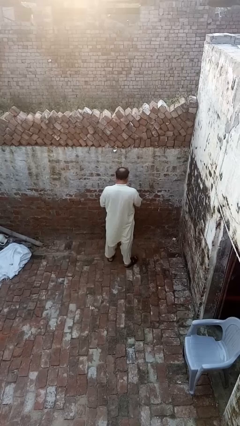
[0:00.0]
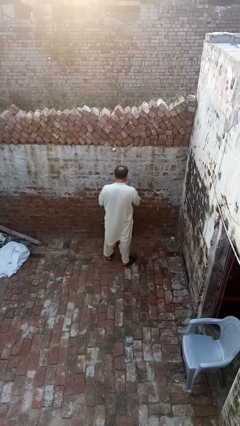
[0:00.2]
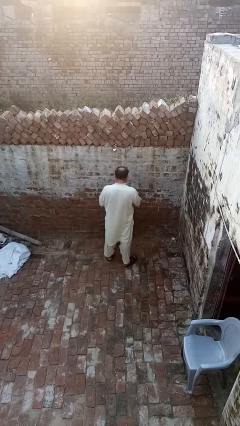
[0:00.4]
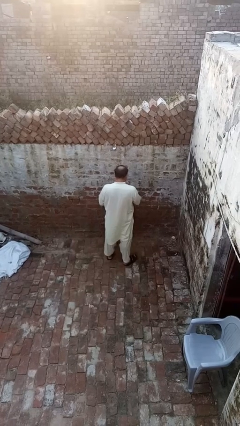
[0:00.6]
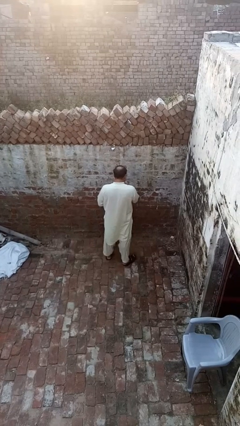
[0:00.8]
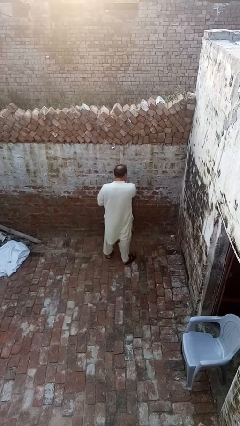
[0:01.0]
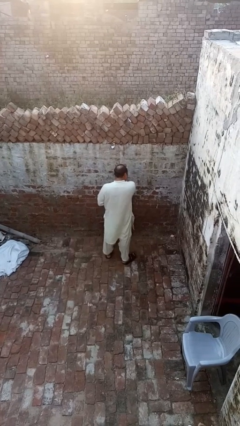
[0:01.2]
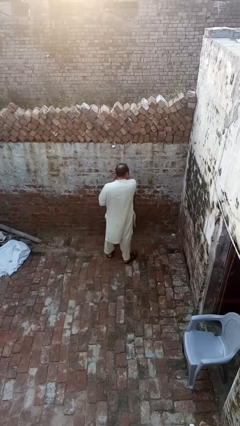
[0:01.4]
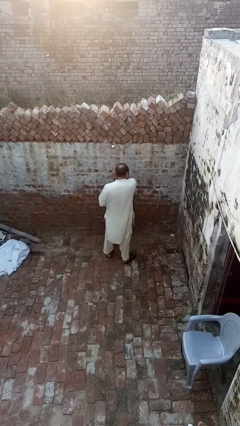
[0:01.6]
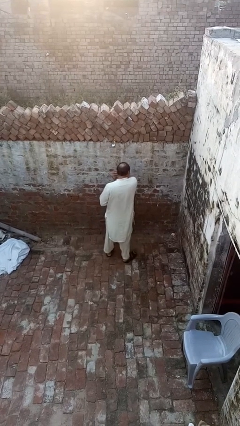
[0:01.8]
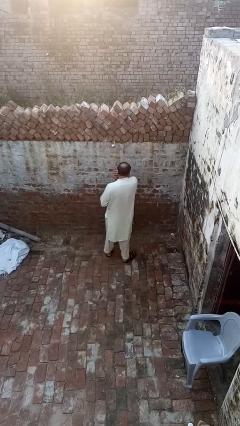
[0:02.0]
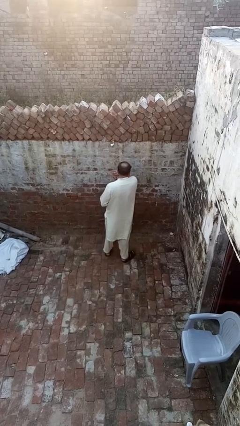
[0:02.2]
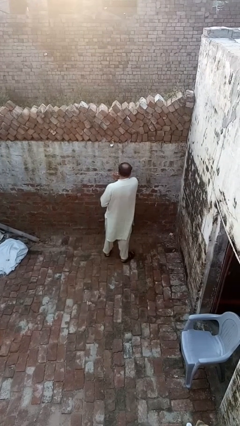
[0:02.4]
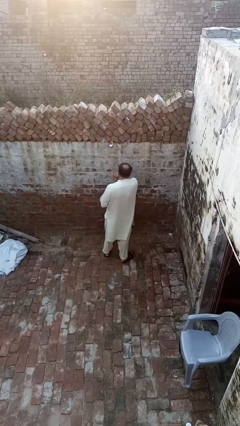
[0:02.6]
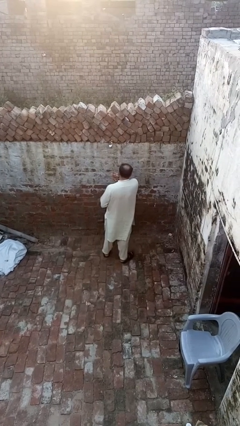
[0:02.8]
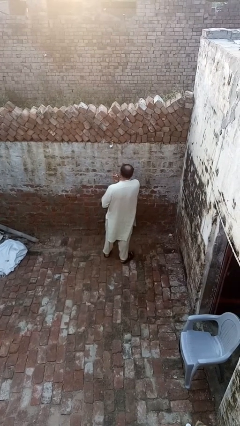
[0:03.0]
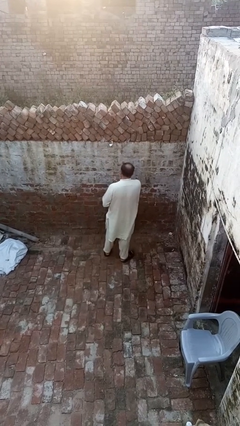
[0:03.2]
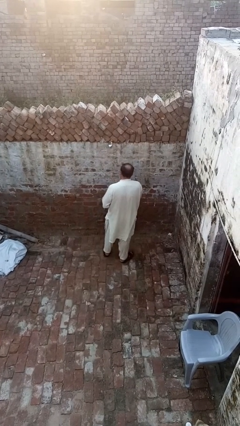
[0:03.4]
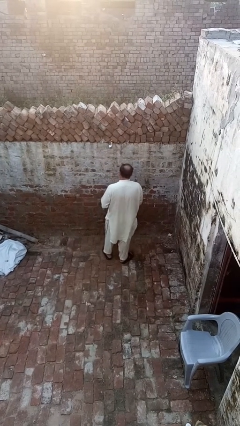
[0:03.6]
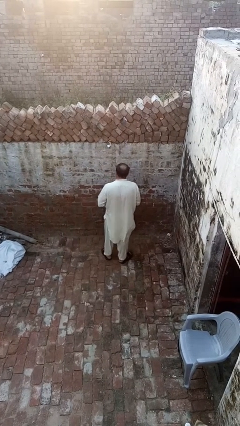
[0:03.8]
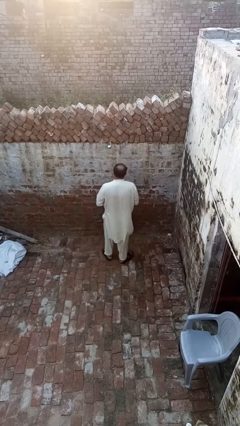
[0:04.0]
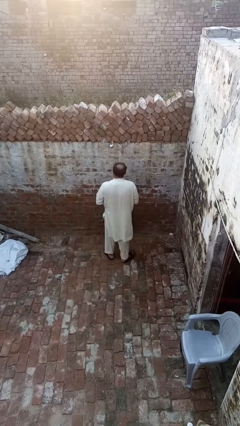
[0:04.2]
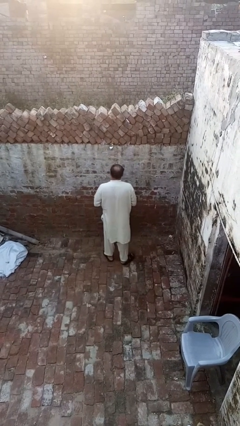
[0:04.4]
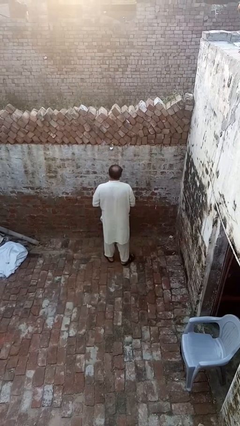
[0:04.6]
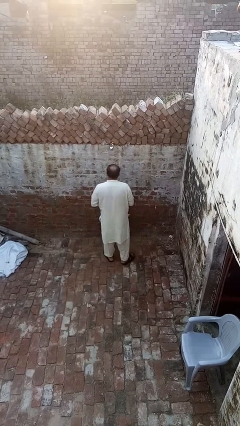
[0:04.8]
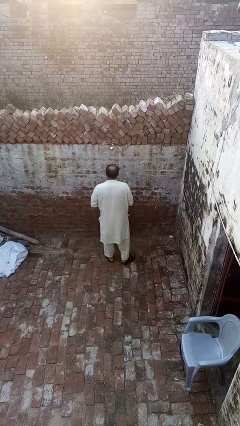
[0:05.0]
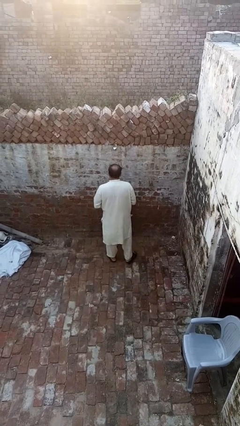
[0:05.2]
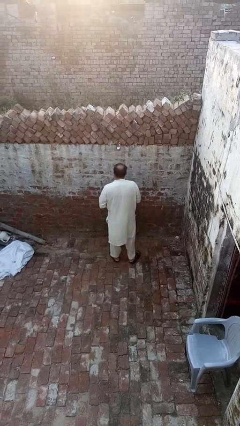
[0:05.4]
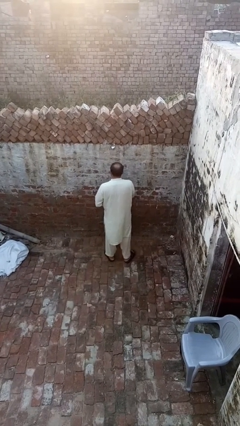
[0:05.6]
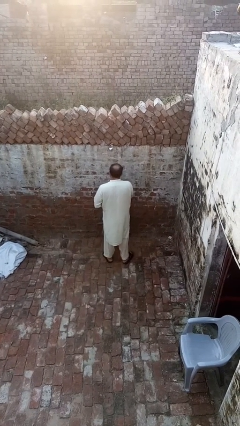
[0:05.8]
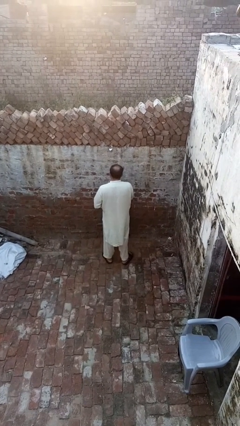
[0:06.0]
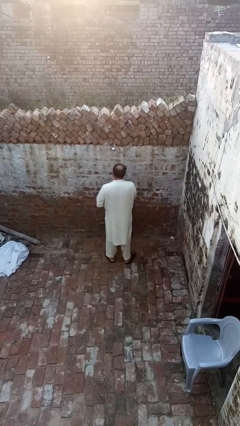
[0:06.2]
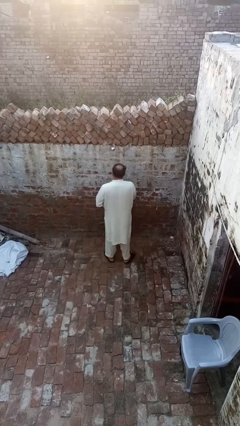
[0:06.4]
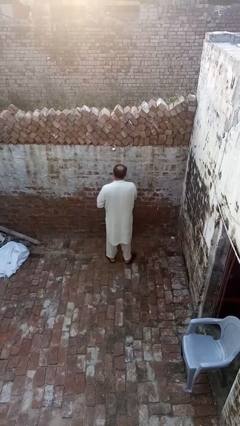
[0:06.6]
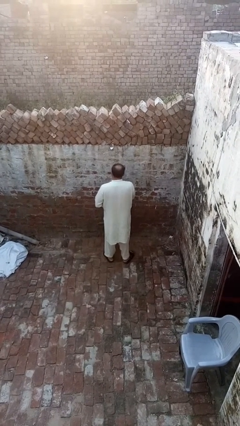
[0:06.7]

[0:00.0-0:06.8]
person puts on earrings

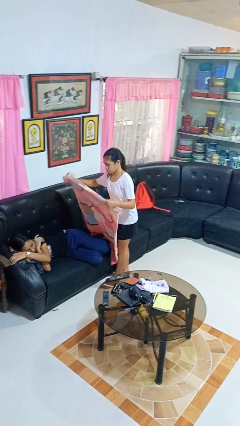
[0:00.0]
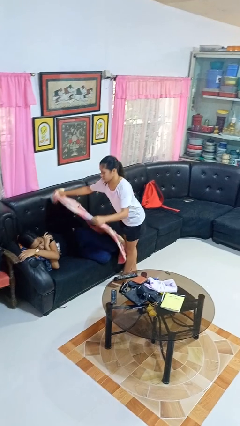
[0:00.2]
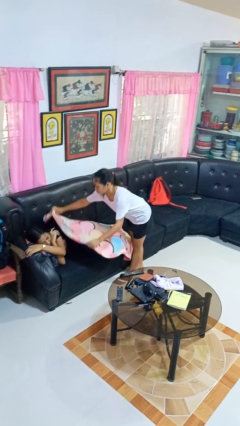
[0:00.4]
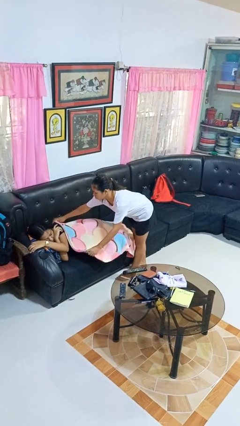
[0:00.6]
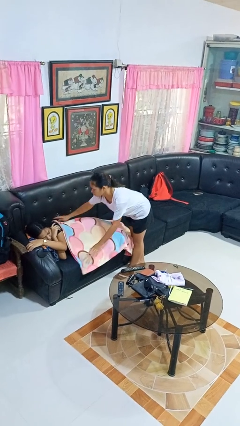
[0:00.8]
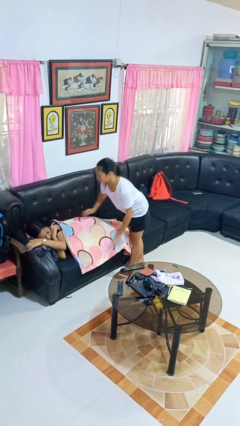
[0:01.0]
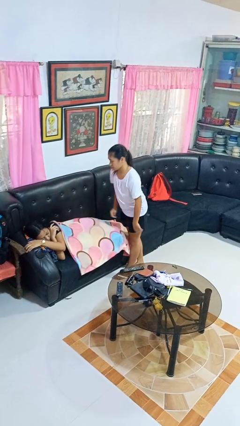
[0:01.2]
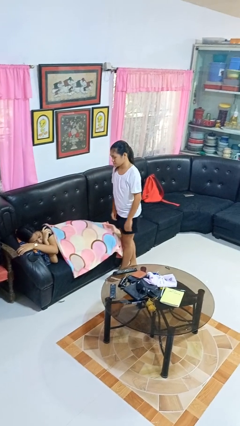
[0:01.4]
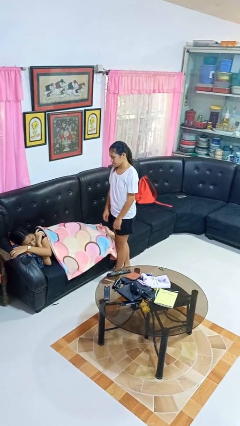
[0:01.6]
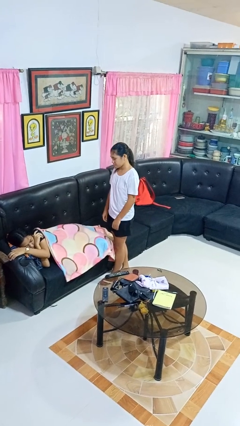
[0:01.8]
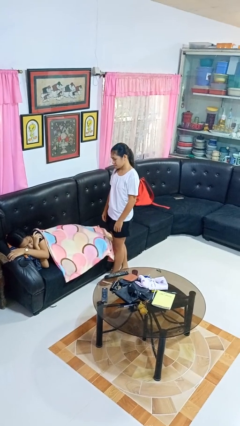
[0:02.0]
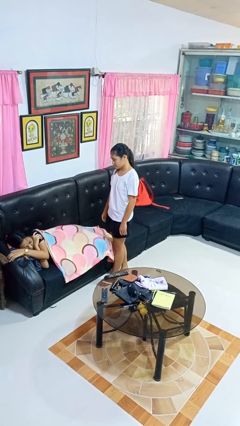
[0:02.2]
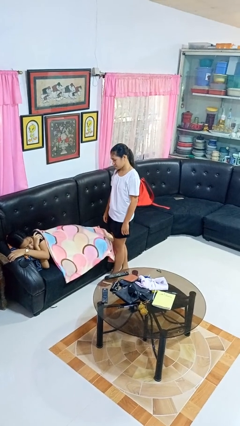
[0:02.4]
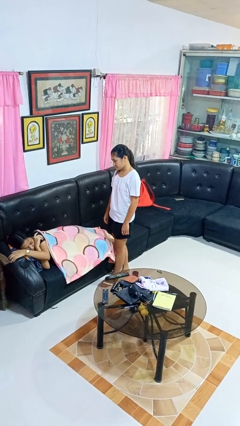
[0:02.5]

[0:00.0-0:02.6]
person covers friend with blanket

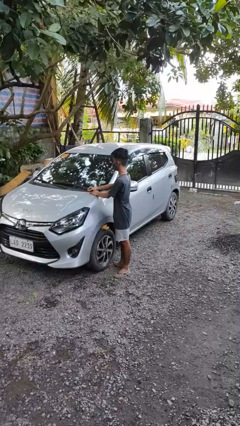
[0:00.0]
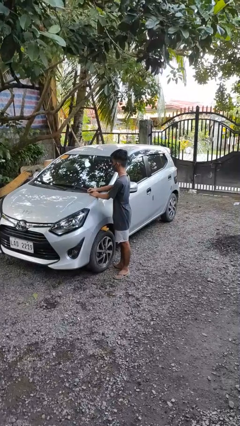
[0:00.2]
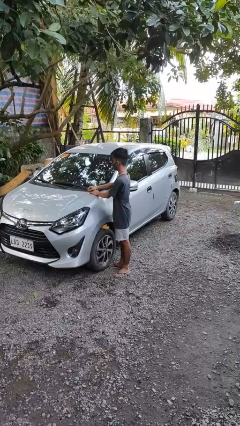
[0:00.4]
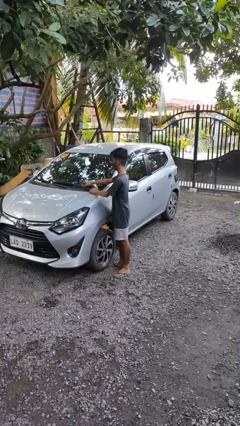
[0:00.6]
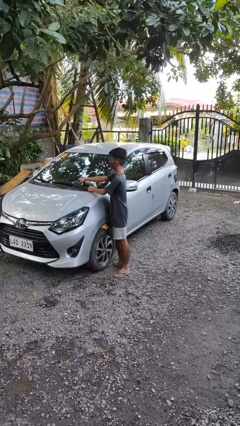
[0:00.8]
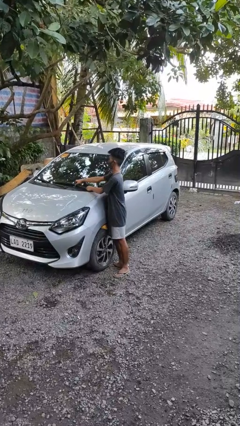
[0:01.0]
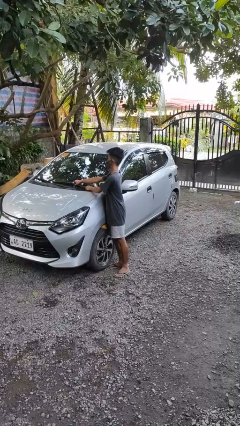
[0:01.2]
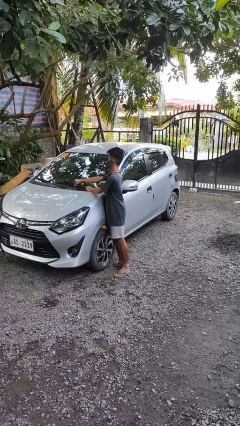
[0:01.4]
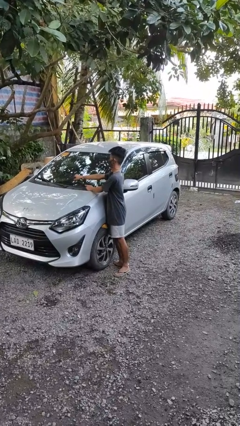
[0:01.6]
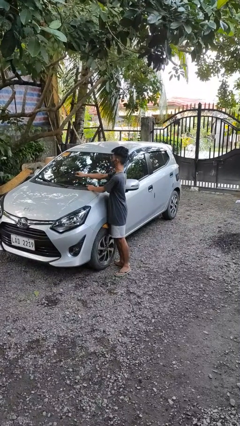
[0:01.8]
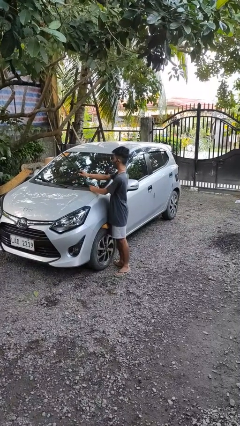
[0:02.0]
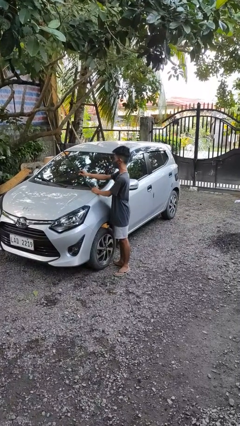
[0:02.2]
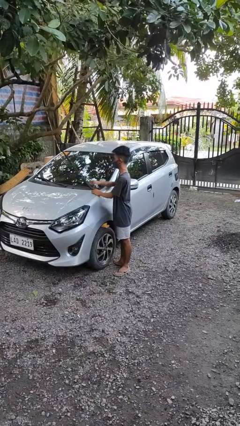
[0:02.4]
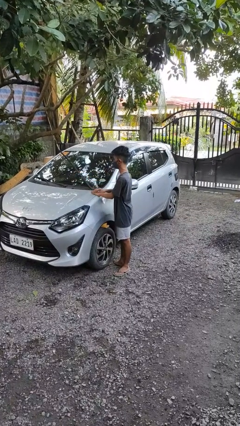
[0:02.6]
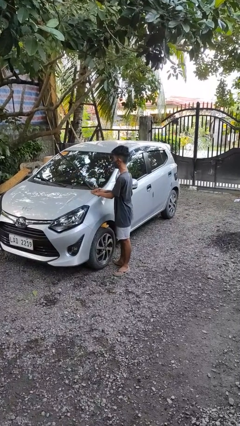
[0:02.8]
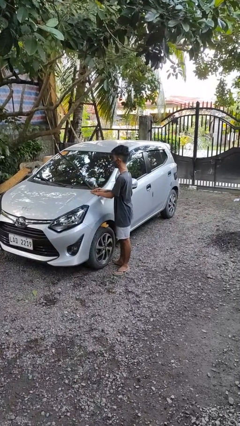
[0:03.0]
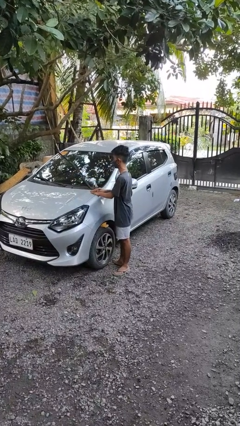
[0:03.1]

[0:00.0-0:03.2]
person flips up car wipers

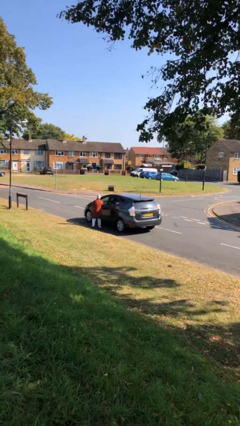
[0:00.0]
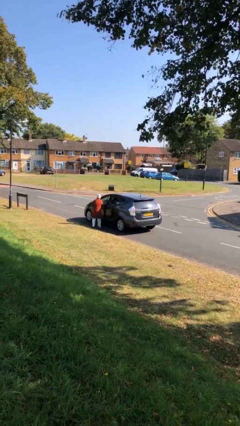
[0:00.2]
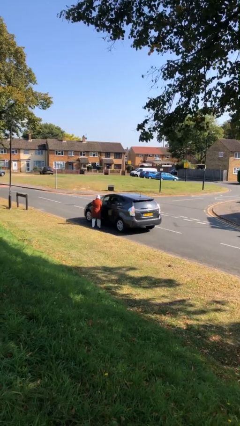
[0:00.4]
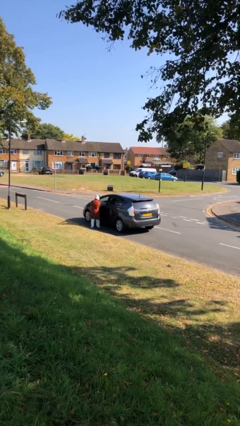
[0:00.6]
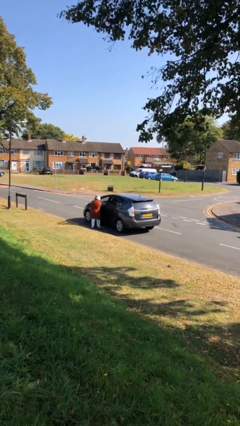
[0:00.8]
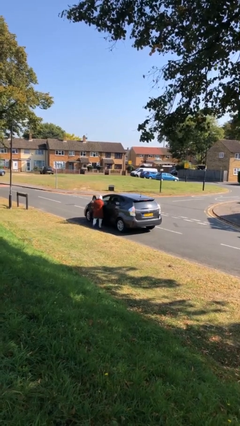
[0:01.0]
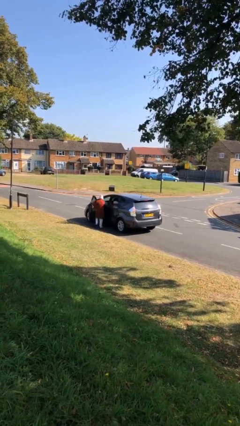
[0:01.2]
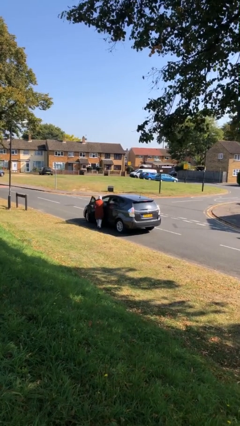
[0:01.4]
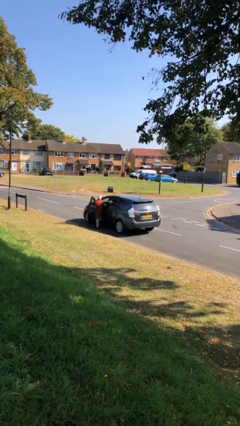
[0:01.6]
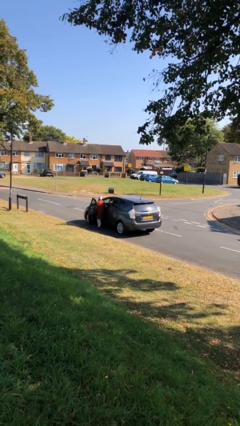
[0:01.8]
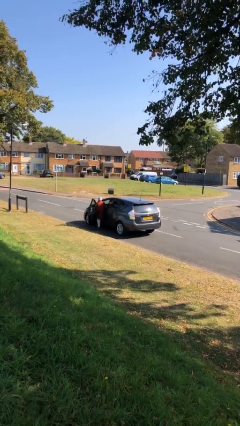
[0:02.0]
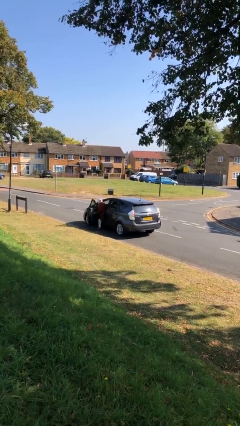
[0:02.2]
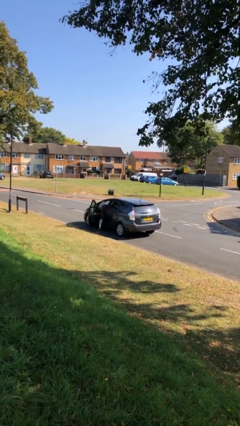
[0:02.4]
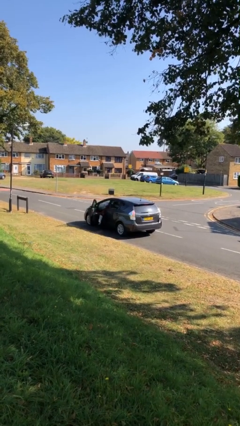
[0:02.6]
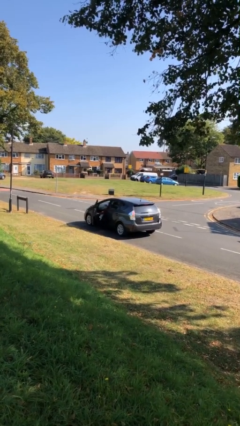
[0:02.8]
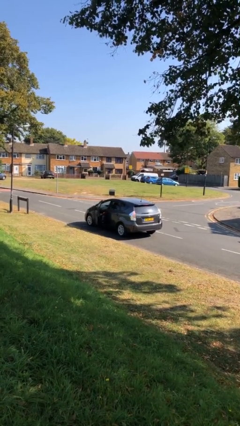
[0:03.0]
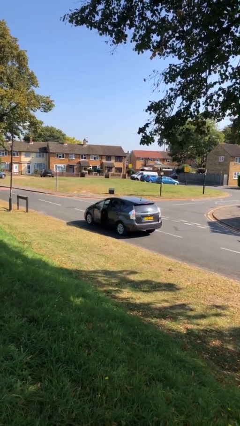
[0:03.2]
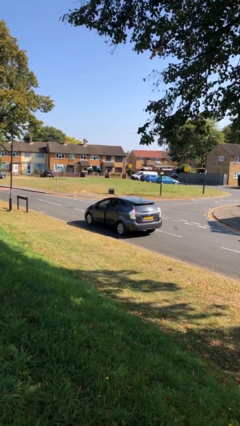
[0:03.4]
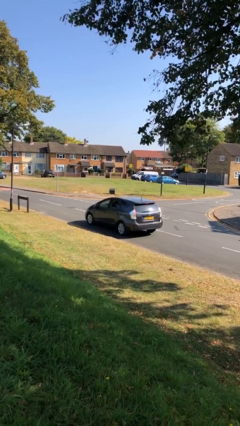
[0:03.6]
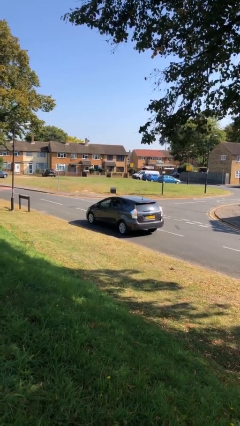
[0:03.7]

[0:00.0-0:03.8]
car picks up person

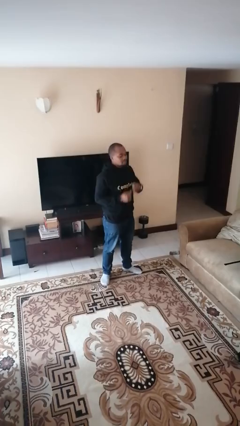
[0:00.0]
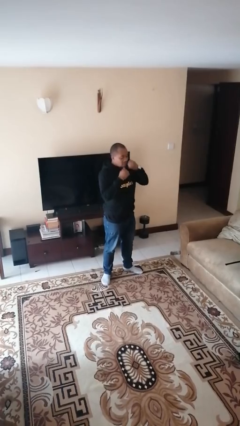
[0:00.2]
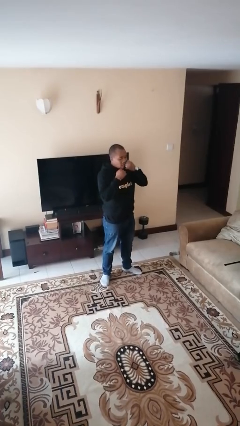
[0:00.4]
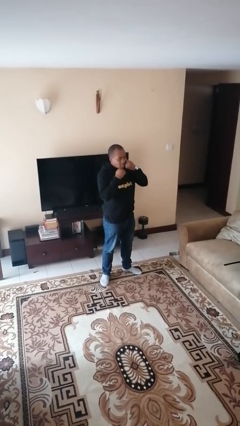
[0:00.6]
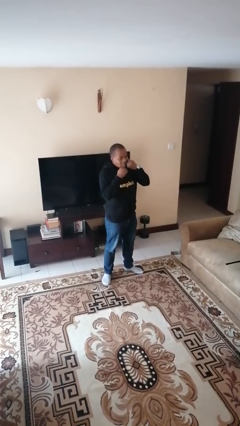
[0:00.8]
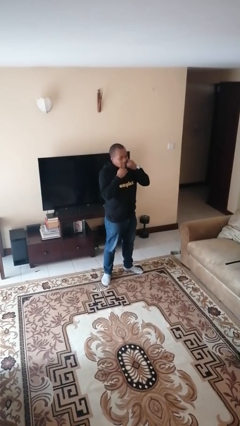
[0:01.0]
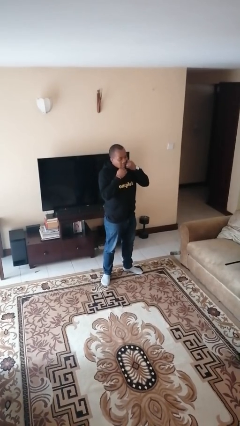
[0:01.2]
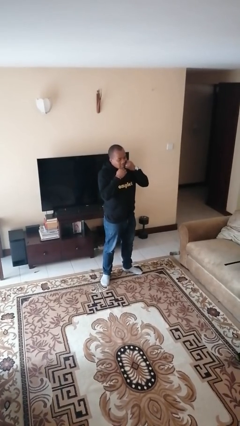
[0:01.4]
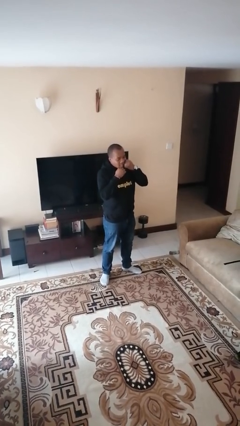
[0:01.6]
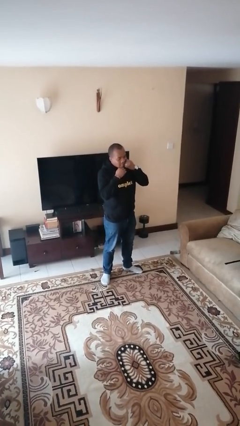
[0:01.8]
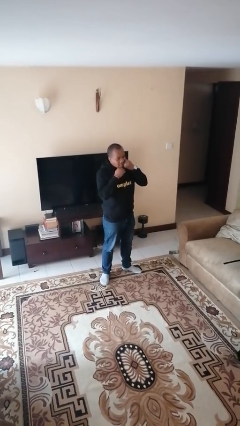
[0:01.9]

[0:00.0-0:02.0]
person flosses
